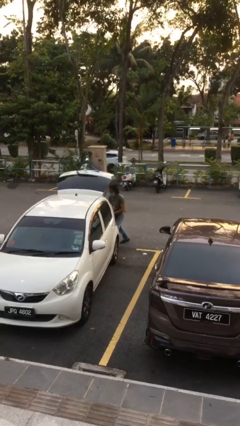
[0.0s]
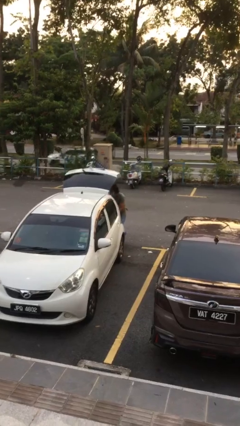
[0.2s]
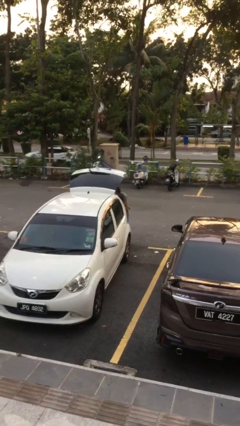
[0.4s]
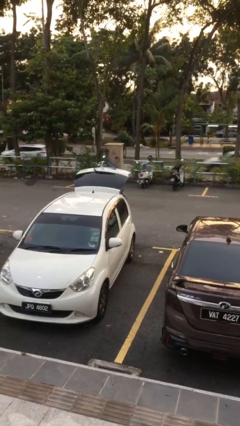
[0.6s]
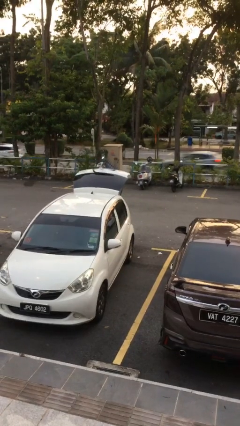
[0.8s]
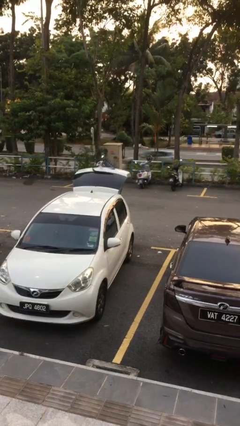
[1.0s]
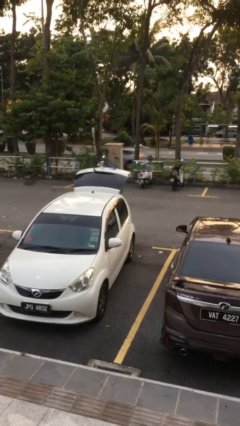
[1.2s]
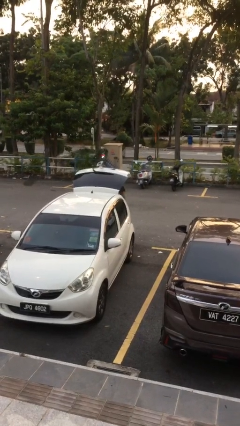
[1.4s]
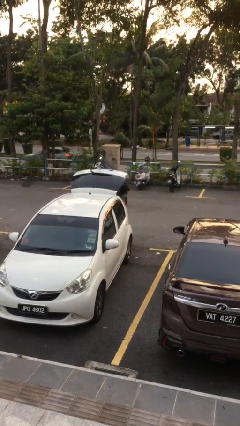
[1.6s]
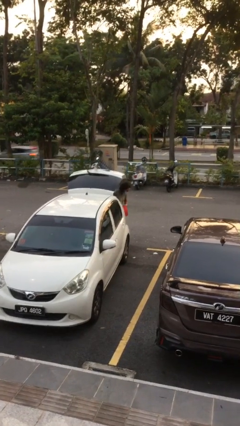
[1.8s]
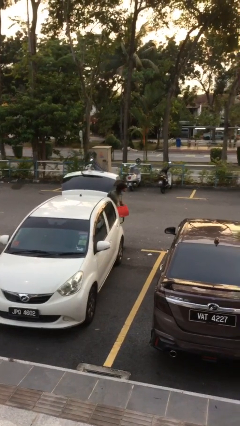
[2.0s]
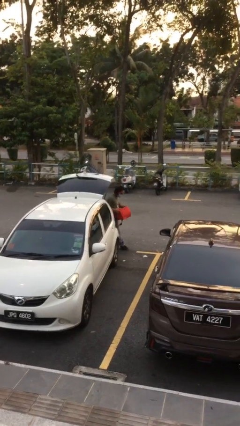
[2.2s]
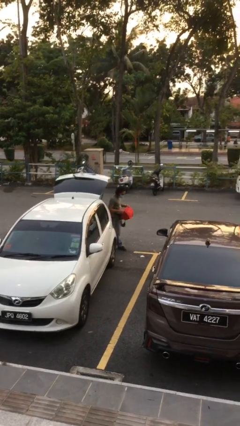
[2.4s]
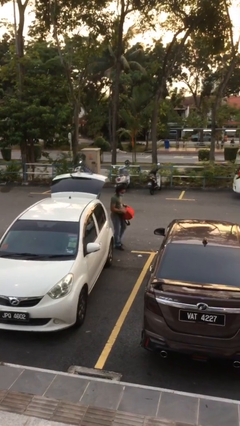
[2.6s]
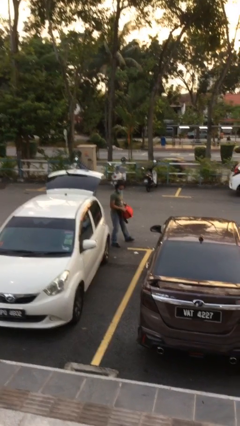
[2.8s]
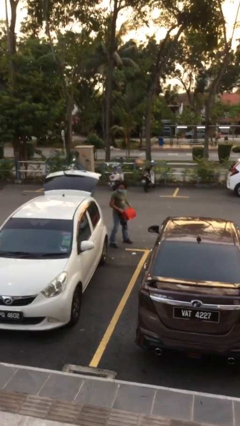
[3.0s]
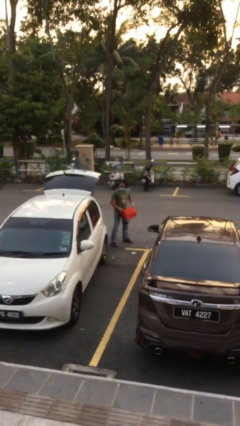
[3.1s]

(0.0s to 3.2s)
person unloads car

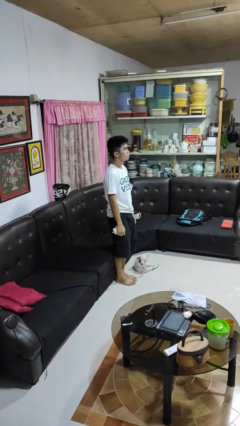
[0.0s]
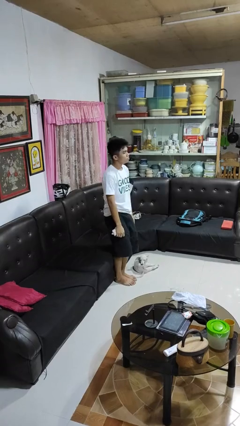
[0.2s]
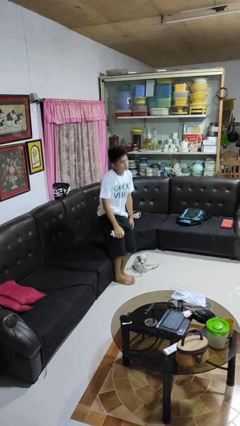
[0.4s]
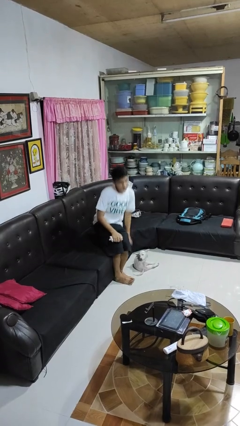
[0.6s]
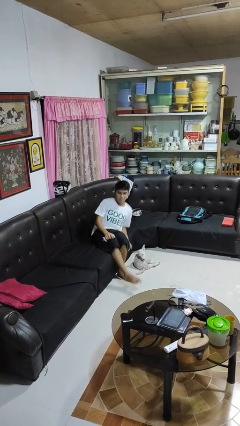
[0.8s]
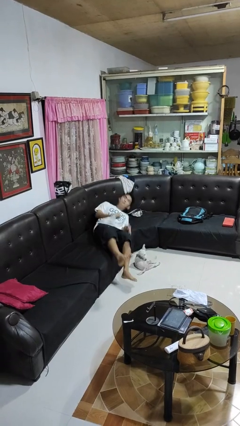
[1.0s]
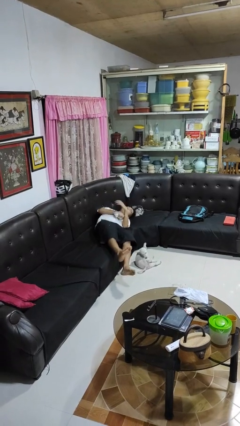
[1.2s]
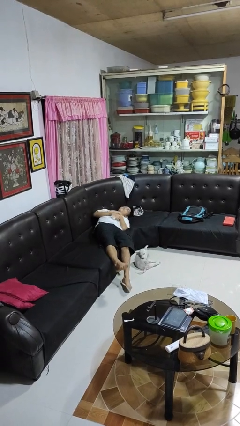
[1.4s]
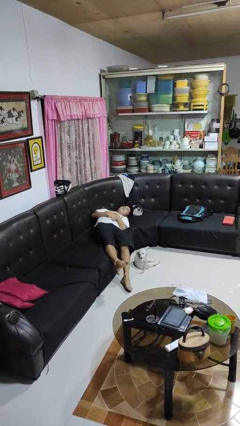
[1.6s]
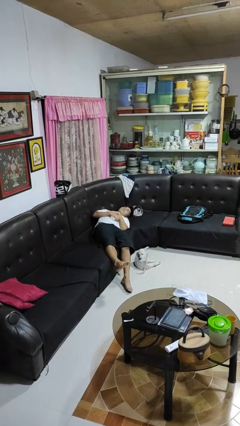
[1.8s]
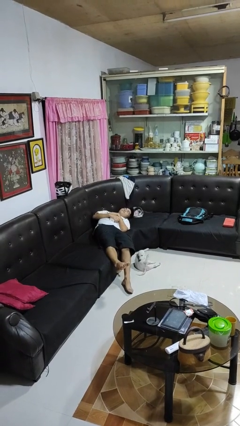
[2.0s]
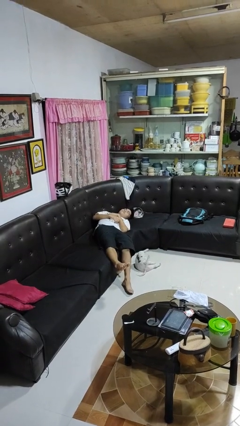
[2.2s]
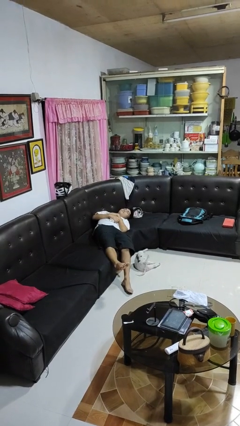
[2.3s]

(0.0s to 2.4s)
person lies down on couch

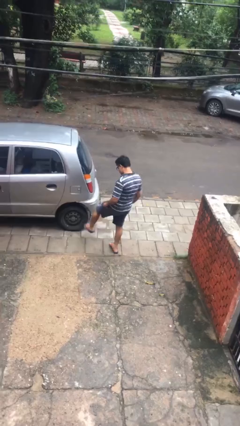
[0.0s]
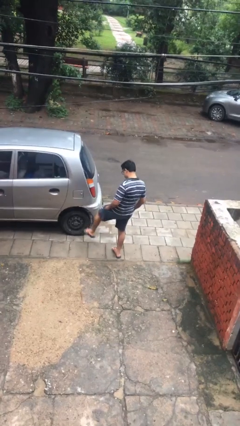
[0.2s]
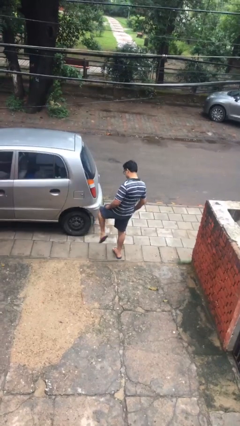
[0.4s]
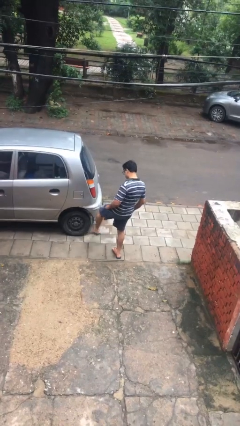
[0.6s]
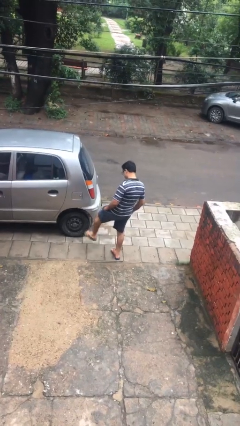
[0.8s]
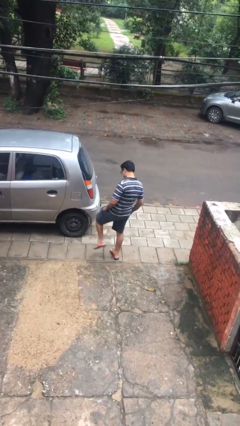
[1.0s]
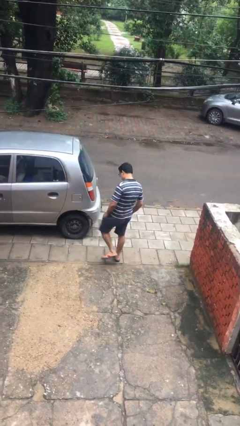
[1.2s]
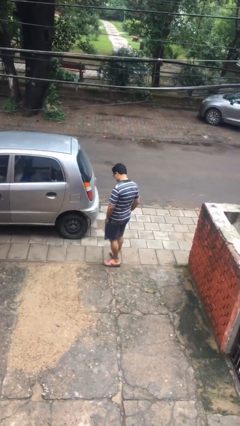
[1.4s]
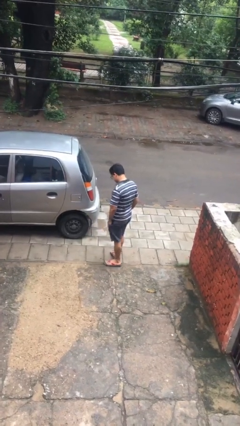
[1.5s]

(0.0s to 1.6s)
person kicks car tires

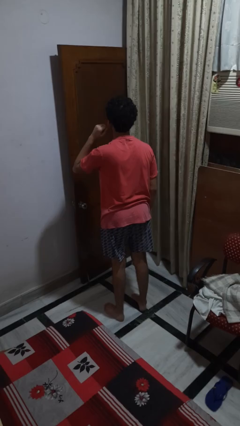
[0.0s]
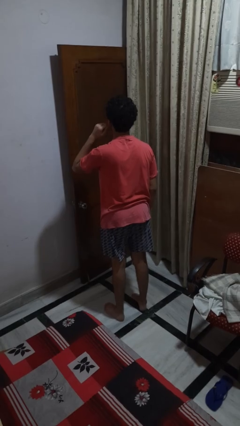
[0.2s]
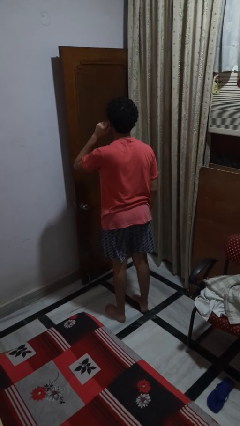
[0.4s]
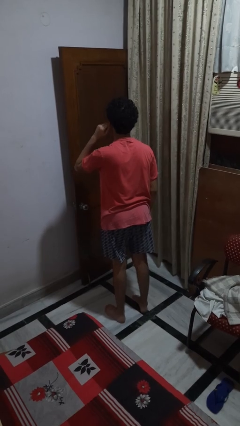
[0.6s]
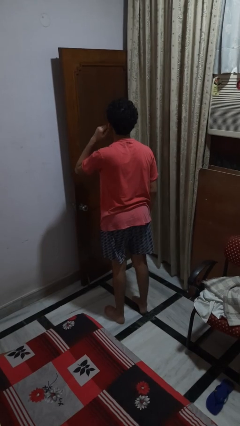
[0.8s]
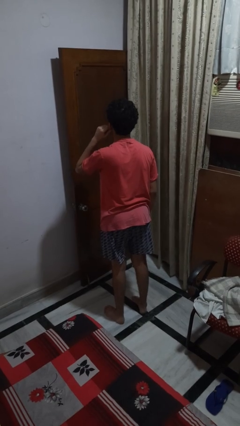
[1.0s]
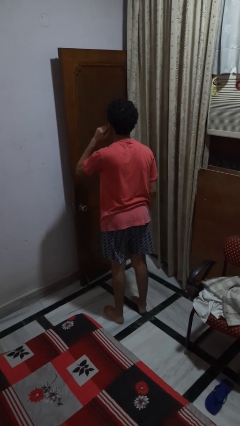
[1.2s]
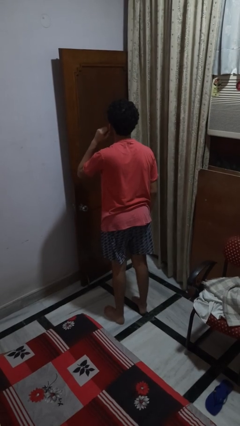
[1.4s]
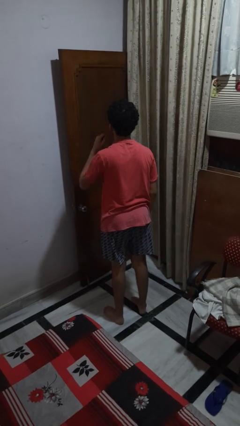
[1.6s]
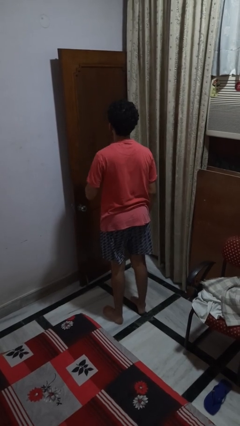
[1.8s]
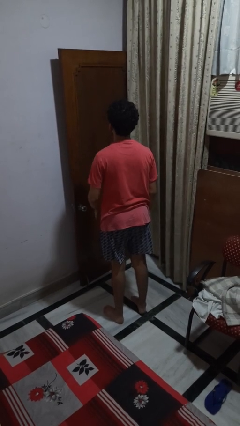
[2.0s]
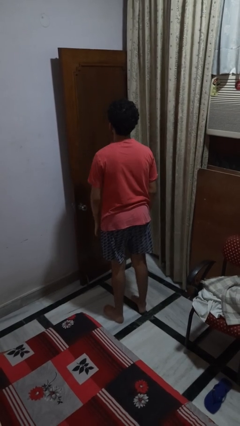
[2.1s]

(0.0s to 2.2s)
person touches earlobe

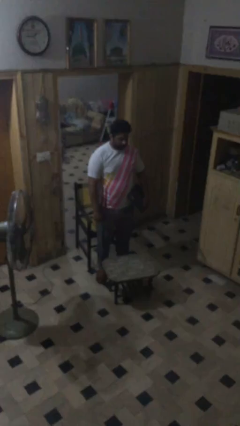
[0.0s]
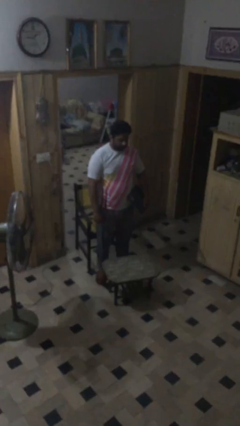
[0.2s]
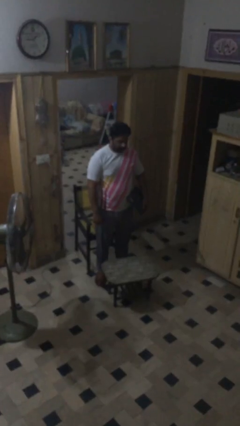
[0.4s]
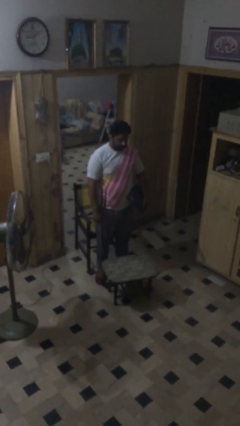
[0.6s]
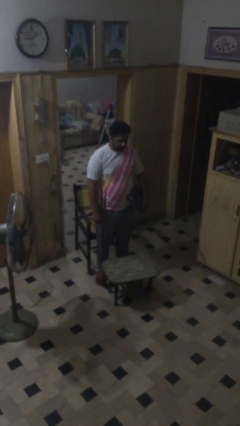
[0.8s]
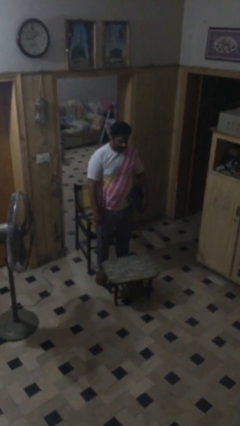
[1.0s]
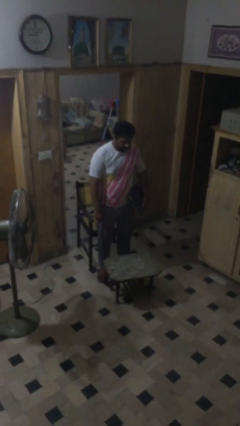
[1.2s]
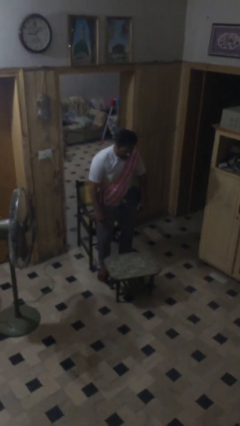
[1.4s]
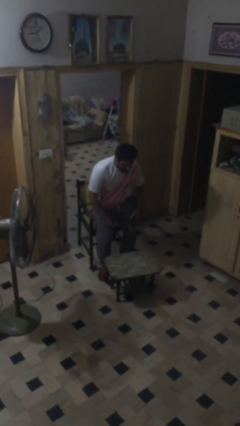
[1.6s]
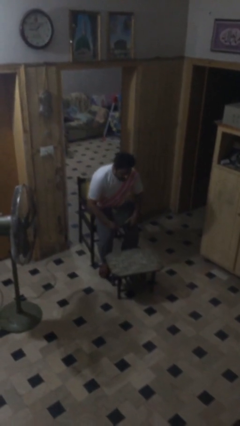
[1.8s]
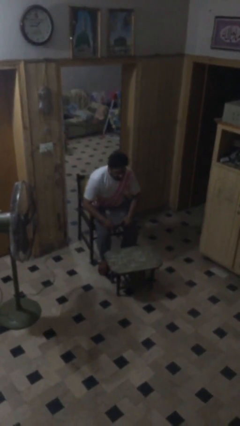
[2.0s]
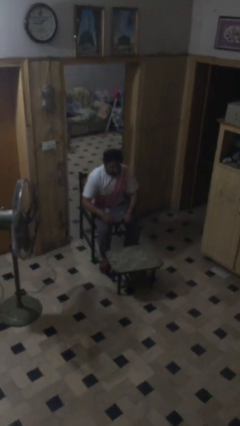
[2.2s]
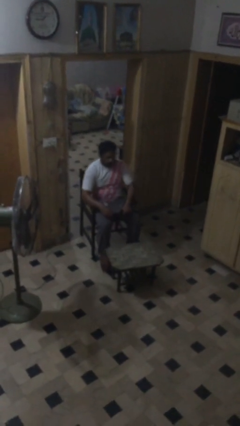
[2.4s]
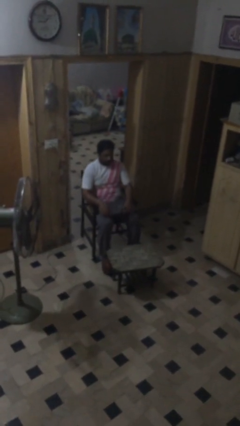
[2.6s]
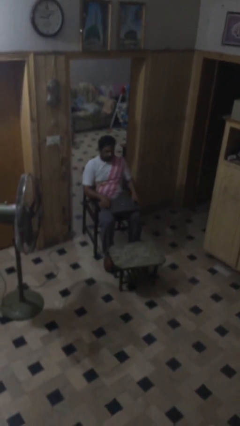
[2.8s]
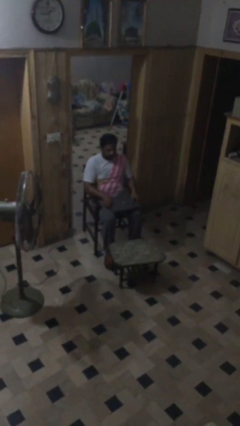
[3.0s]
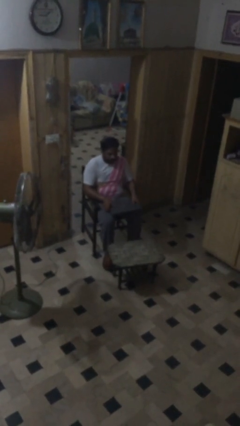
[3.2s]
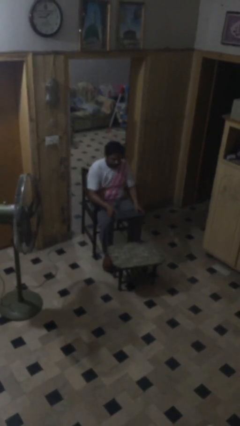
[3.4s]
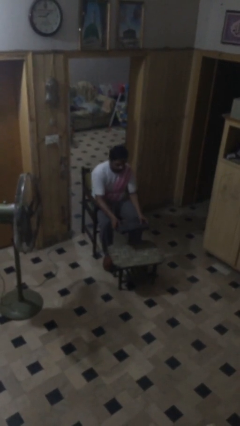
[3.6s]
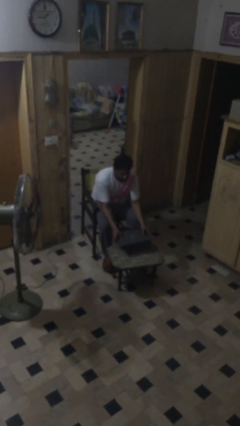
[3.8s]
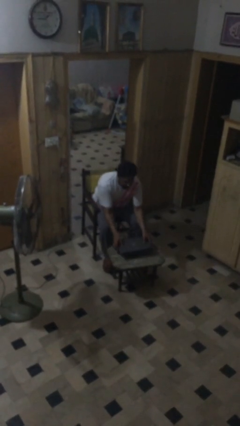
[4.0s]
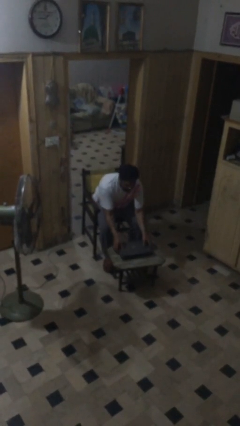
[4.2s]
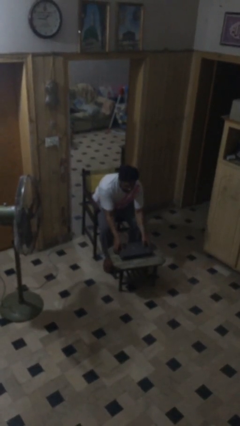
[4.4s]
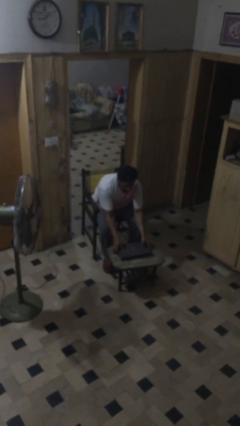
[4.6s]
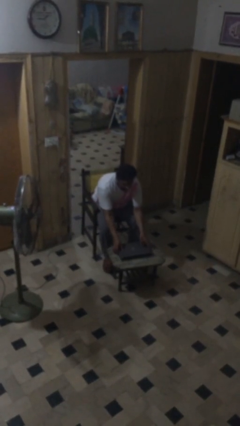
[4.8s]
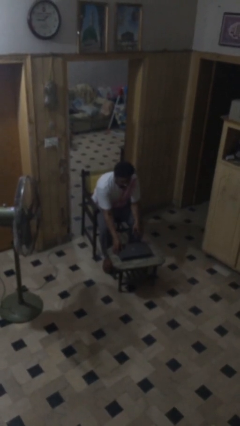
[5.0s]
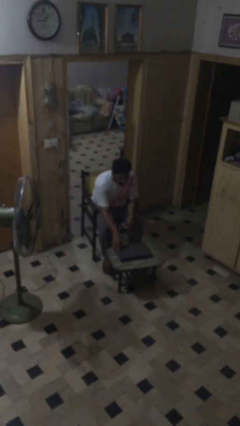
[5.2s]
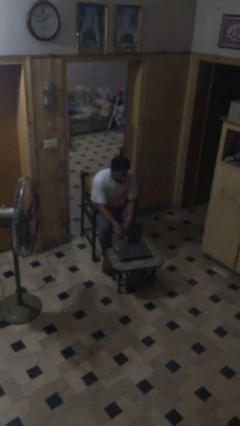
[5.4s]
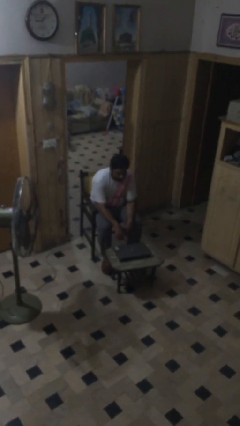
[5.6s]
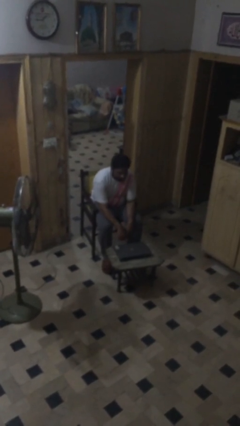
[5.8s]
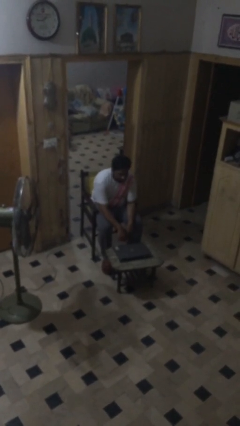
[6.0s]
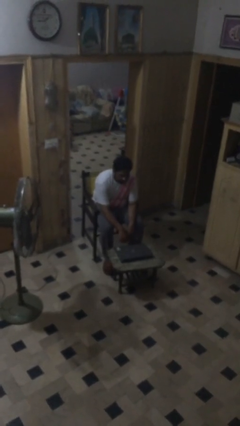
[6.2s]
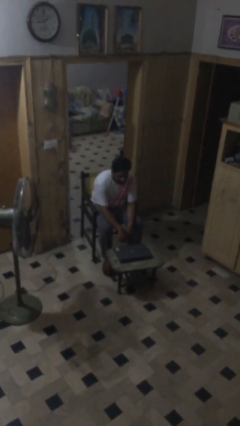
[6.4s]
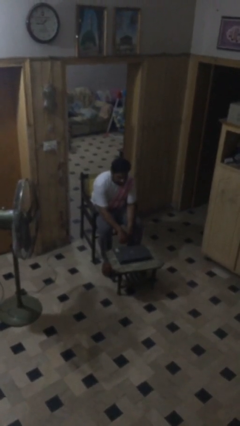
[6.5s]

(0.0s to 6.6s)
person sits down

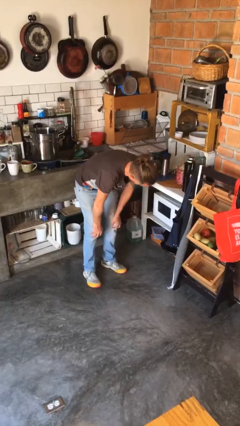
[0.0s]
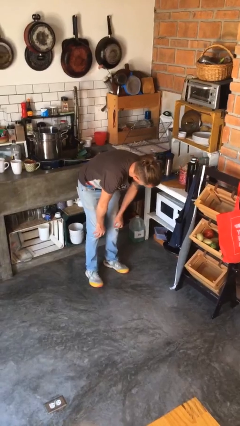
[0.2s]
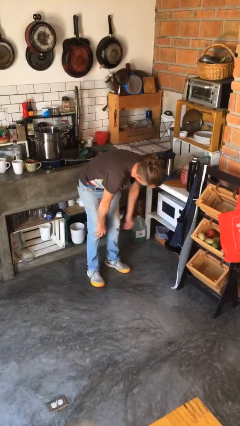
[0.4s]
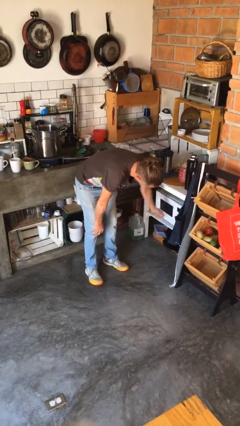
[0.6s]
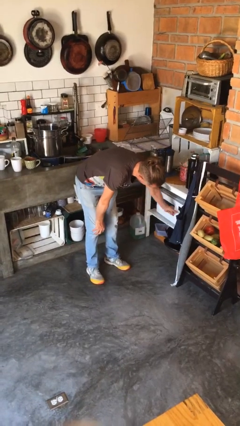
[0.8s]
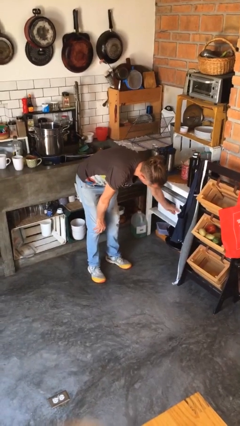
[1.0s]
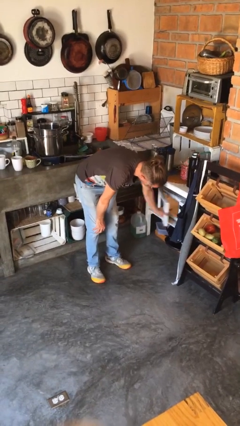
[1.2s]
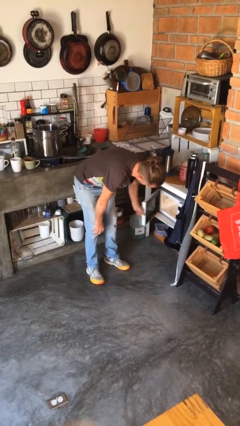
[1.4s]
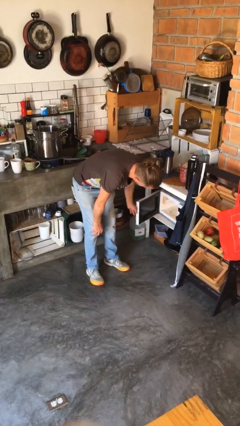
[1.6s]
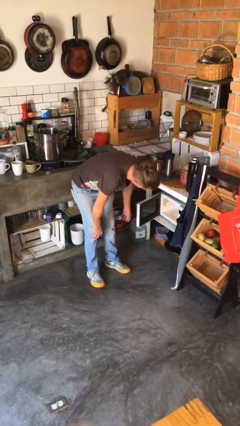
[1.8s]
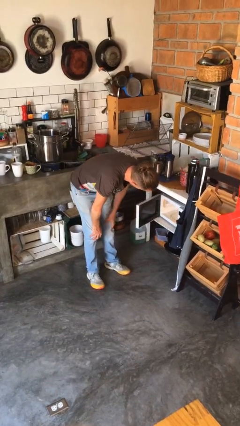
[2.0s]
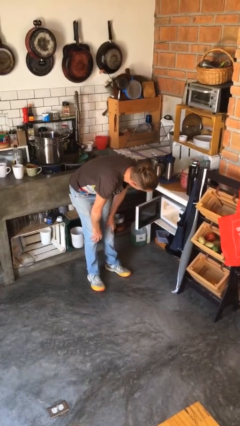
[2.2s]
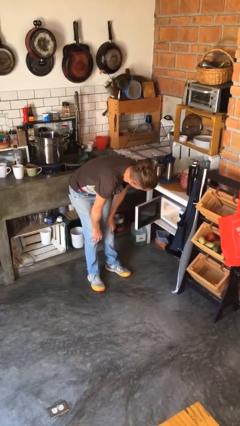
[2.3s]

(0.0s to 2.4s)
person opens microwave
